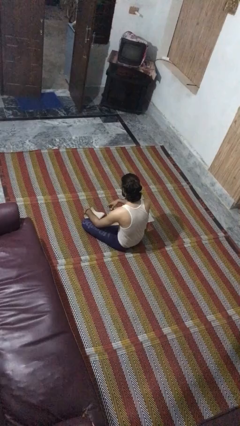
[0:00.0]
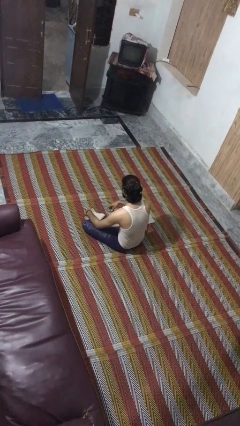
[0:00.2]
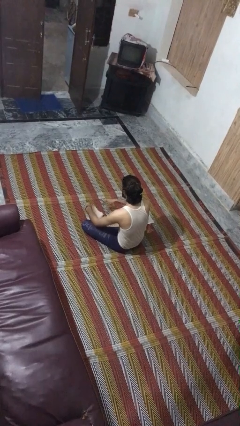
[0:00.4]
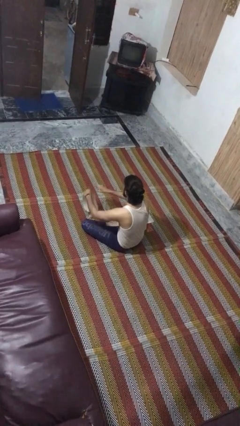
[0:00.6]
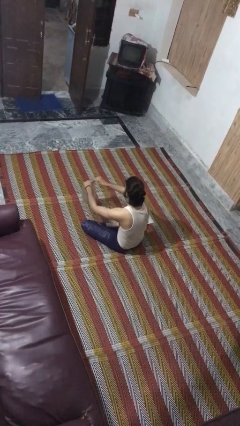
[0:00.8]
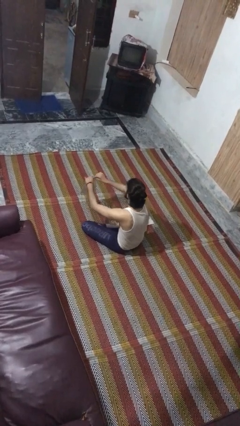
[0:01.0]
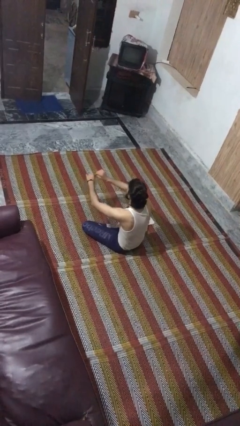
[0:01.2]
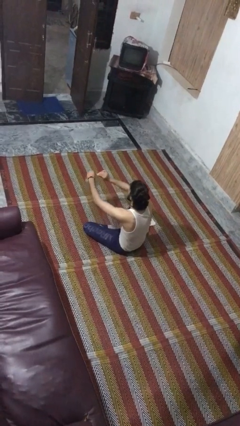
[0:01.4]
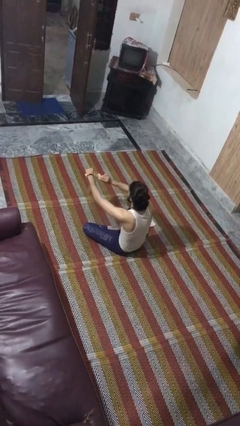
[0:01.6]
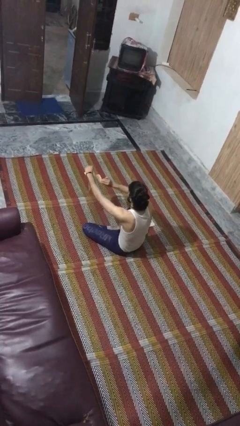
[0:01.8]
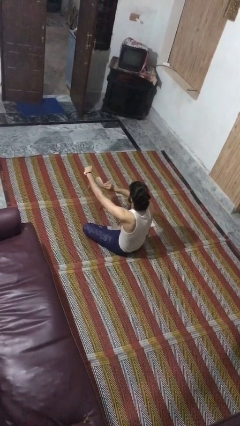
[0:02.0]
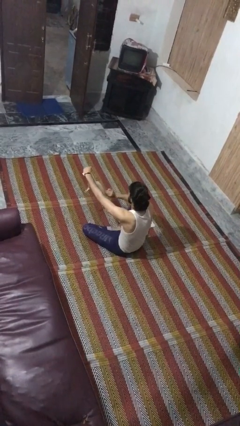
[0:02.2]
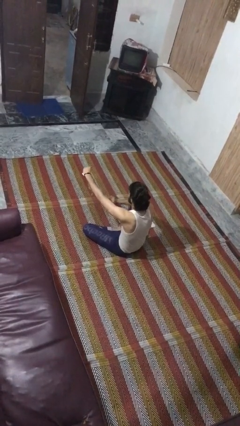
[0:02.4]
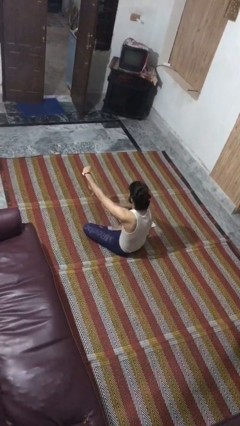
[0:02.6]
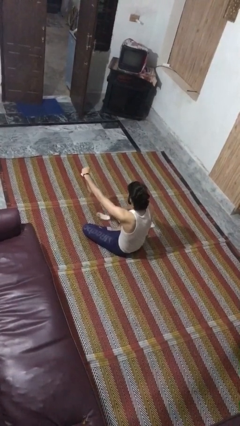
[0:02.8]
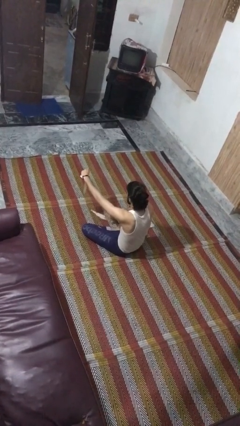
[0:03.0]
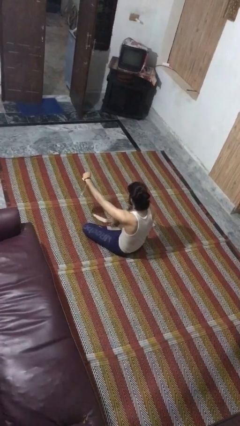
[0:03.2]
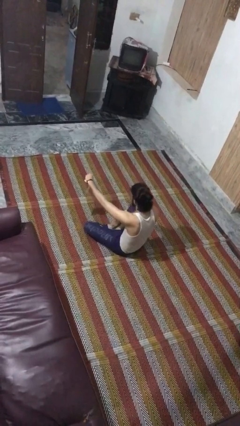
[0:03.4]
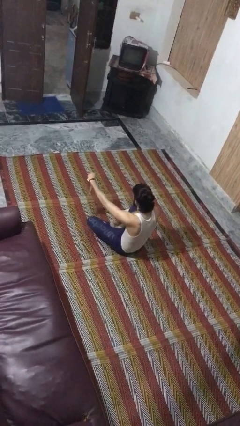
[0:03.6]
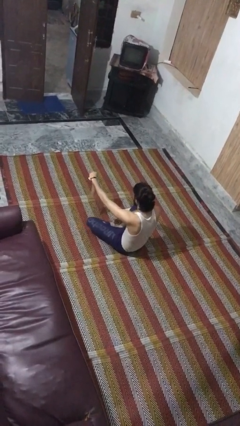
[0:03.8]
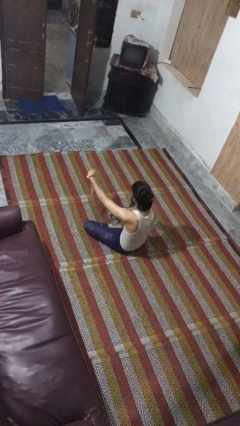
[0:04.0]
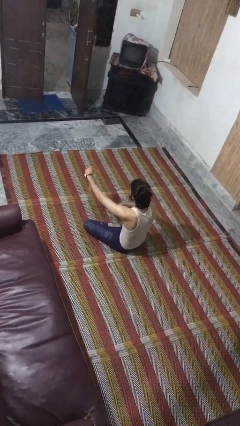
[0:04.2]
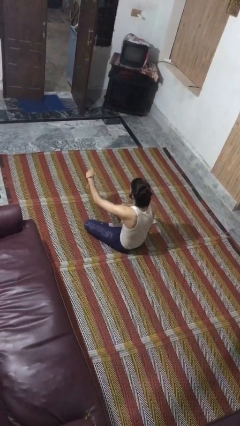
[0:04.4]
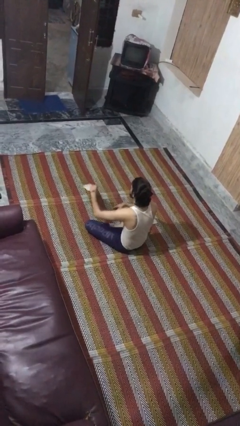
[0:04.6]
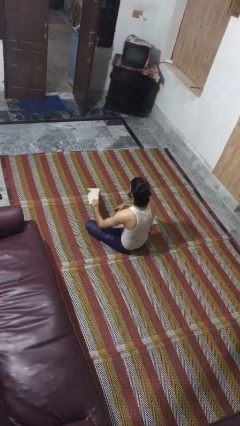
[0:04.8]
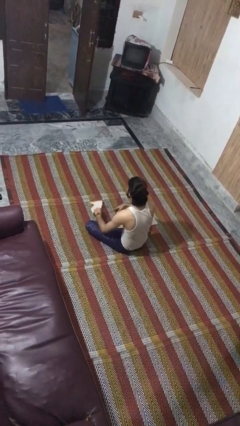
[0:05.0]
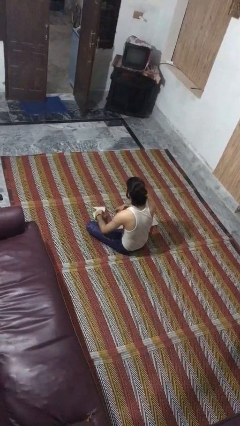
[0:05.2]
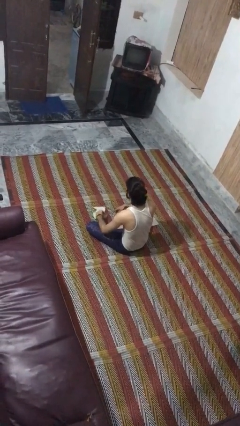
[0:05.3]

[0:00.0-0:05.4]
person tears paper

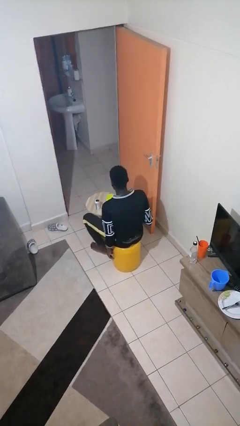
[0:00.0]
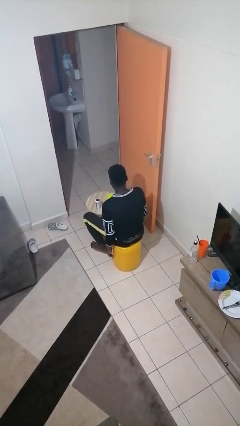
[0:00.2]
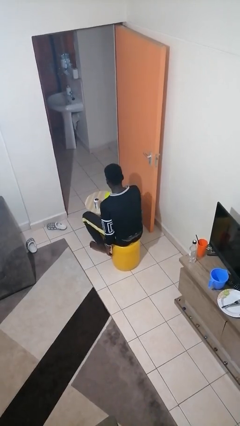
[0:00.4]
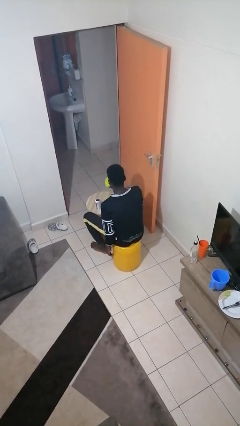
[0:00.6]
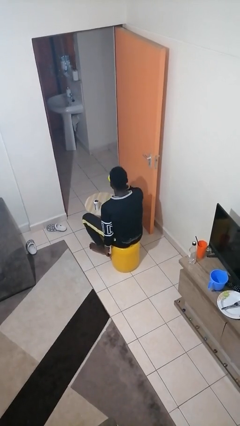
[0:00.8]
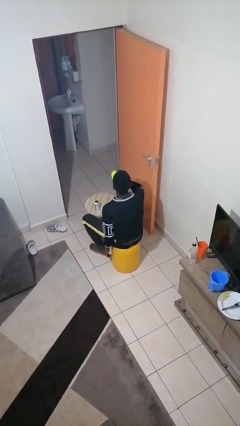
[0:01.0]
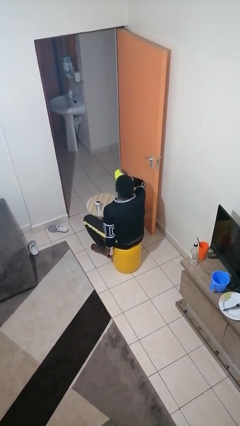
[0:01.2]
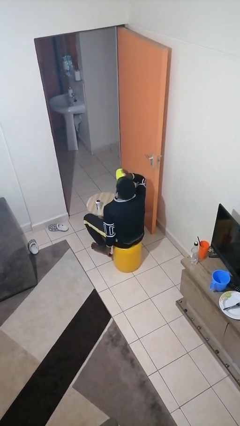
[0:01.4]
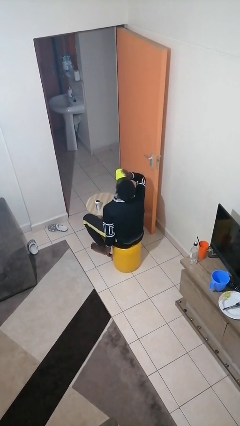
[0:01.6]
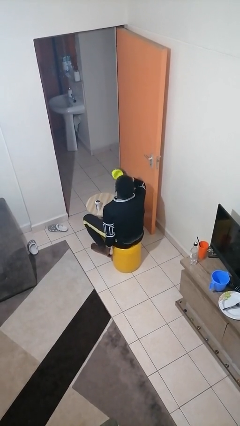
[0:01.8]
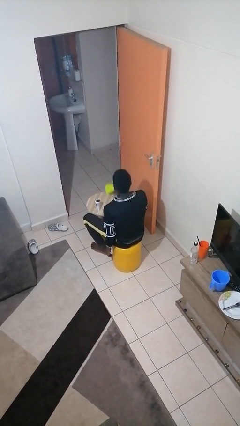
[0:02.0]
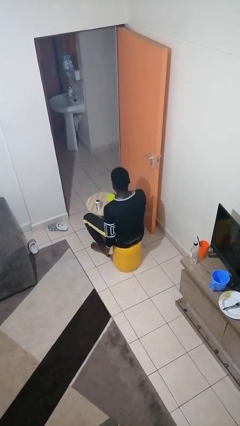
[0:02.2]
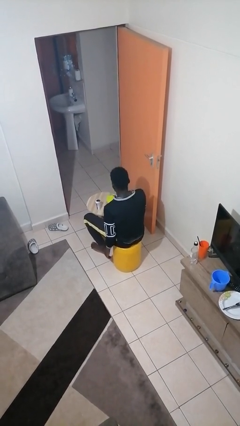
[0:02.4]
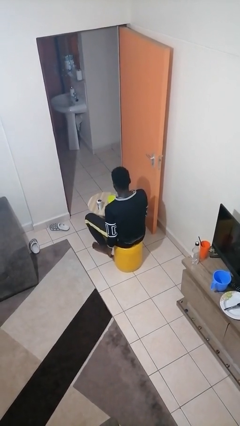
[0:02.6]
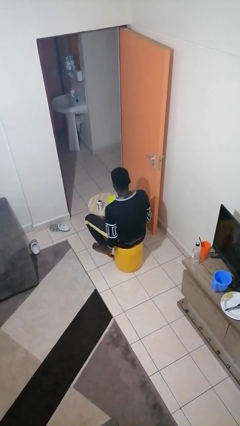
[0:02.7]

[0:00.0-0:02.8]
person drinks from cup

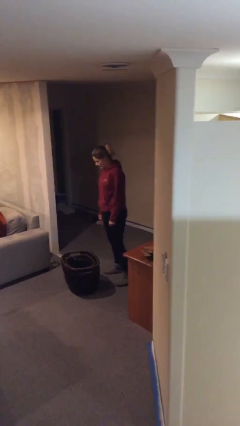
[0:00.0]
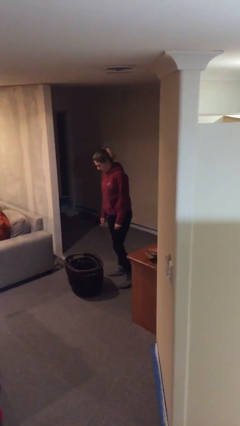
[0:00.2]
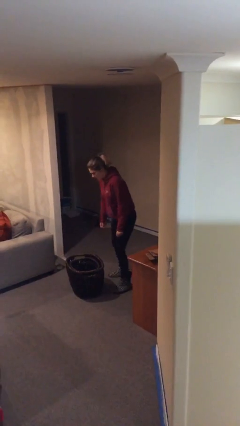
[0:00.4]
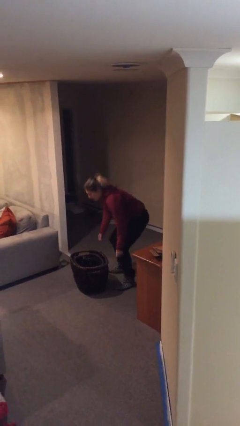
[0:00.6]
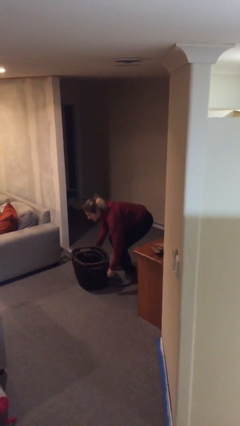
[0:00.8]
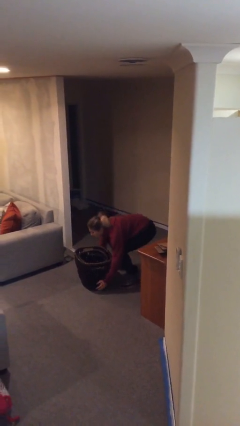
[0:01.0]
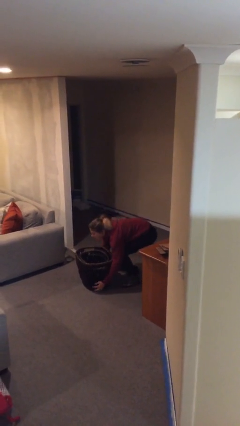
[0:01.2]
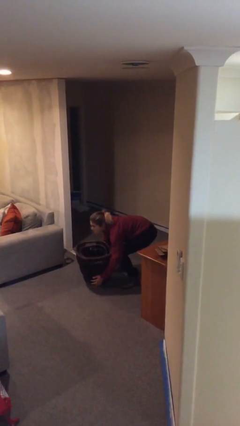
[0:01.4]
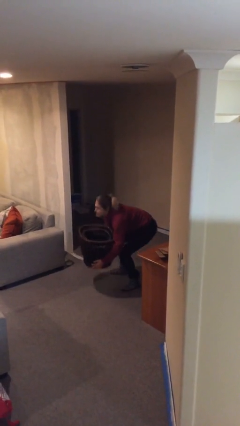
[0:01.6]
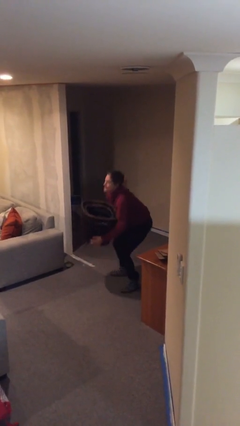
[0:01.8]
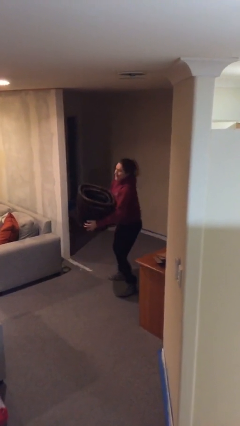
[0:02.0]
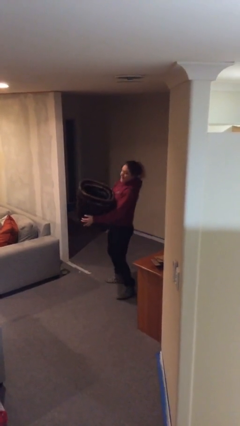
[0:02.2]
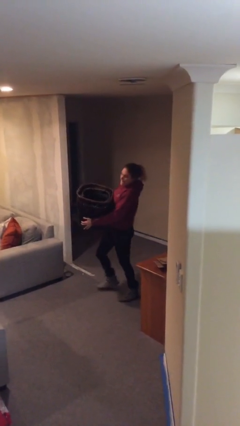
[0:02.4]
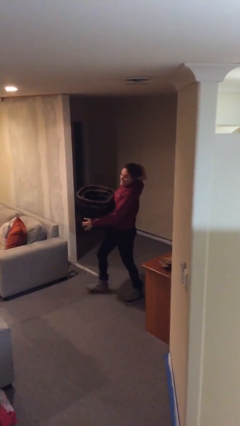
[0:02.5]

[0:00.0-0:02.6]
person picks up object from floor

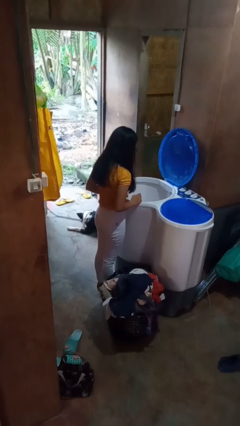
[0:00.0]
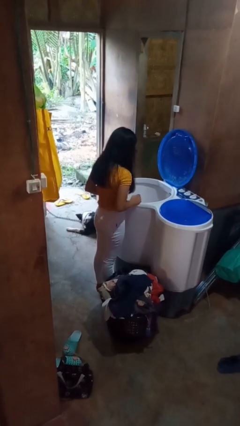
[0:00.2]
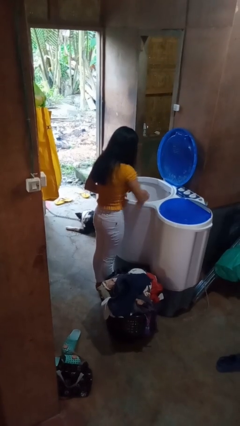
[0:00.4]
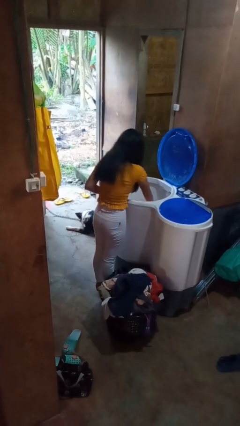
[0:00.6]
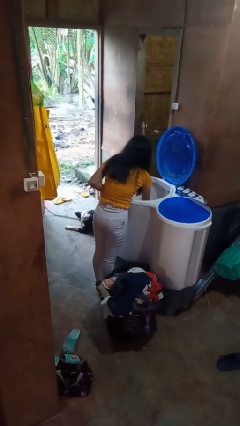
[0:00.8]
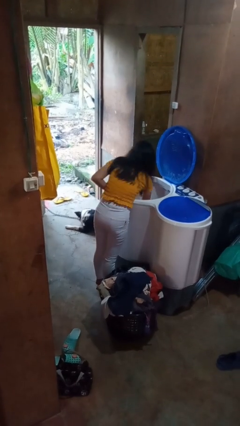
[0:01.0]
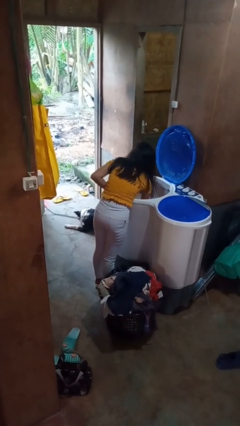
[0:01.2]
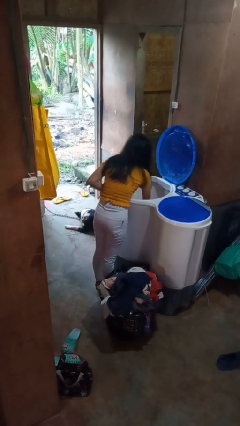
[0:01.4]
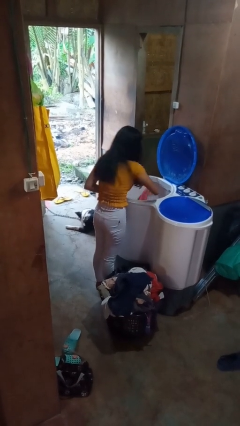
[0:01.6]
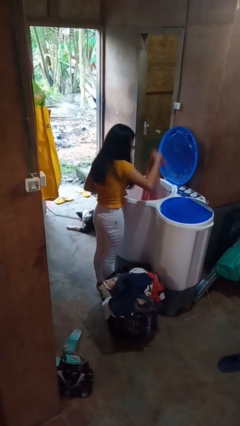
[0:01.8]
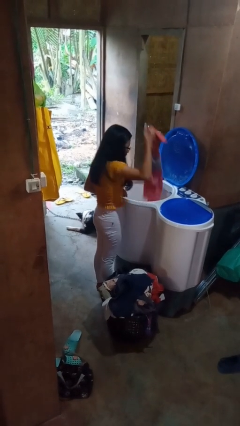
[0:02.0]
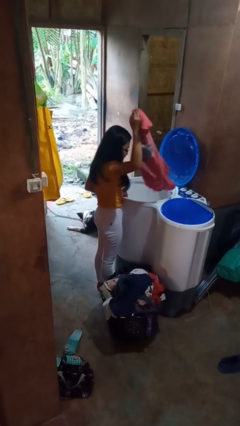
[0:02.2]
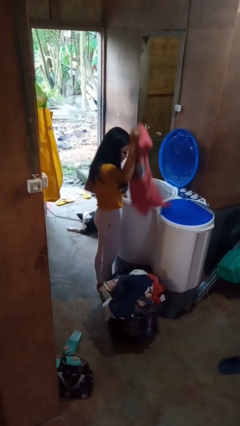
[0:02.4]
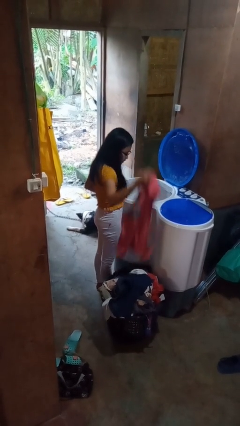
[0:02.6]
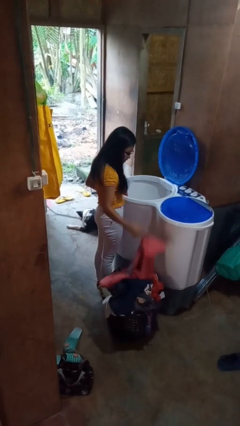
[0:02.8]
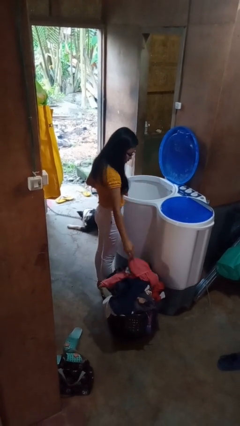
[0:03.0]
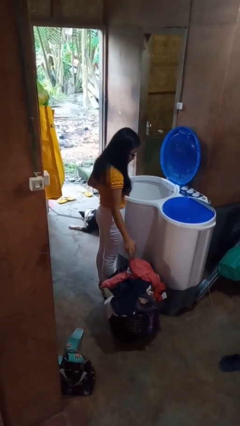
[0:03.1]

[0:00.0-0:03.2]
person unloads clotheswasher

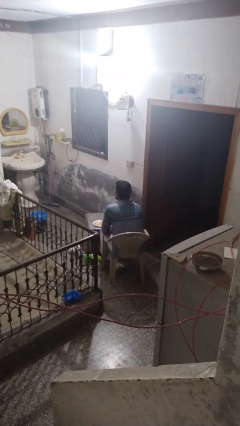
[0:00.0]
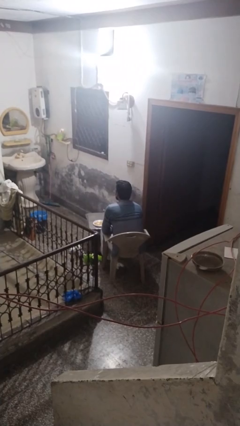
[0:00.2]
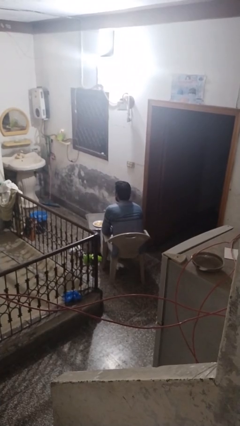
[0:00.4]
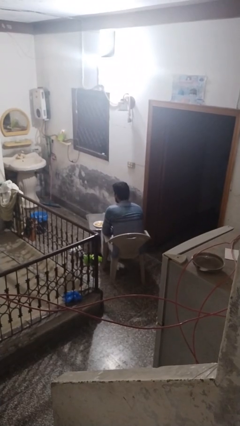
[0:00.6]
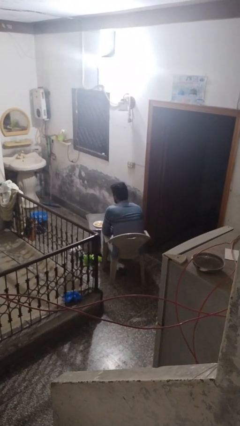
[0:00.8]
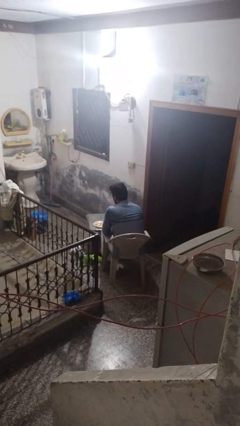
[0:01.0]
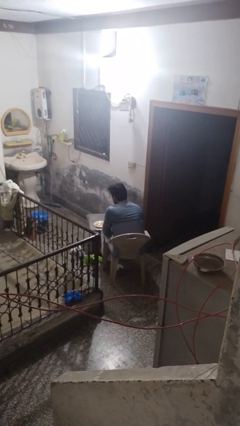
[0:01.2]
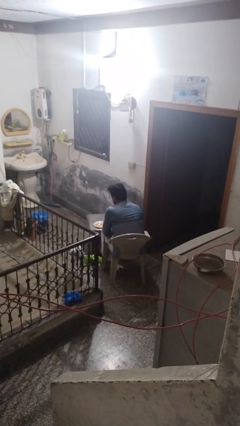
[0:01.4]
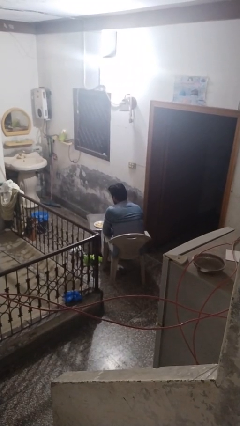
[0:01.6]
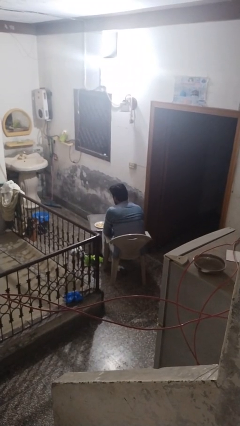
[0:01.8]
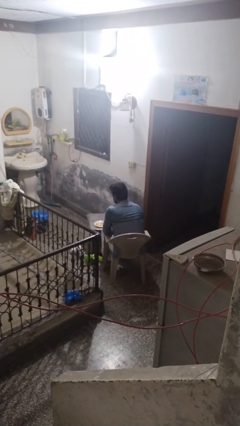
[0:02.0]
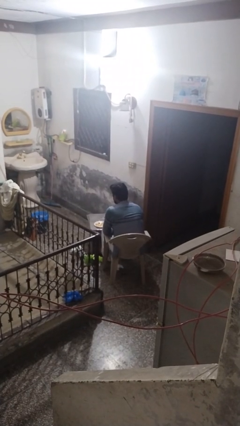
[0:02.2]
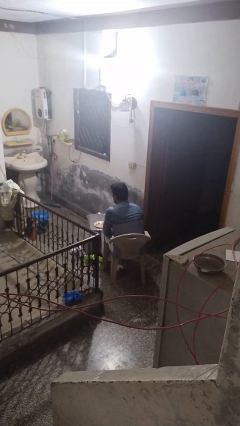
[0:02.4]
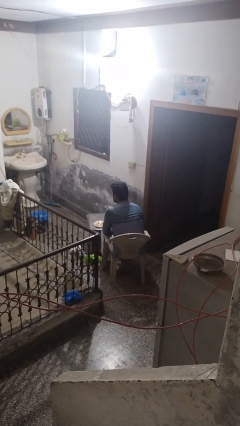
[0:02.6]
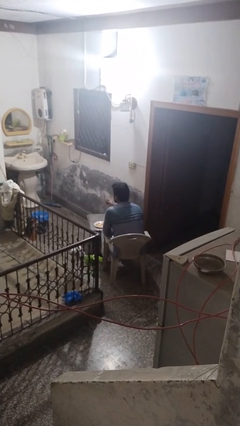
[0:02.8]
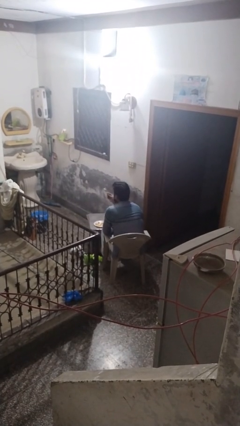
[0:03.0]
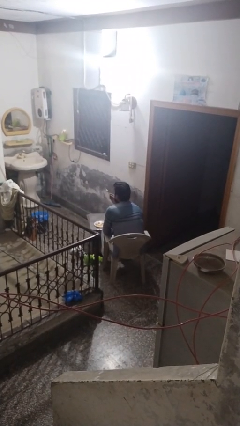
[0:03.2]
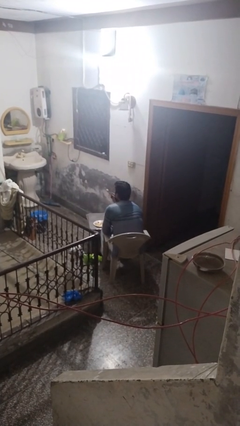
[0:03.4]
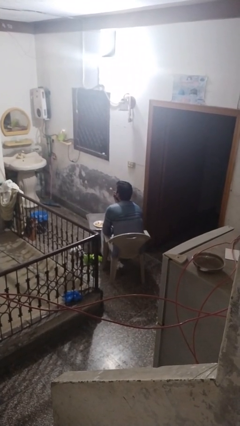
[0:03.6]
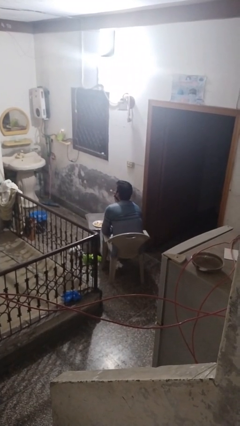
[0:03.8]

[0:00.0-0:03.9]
person eats with utensil
